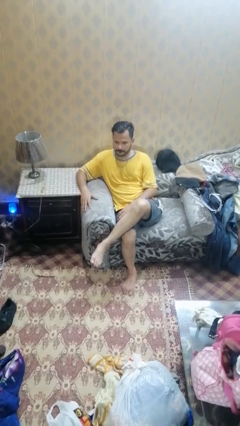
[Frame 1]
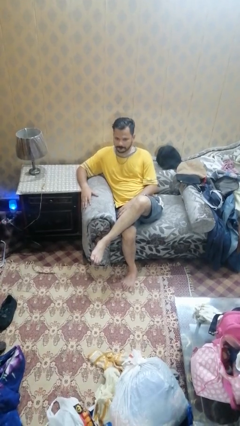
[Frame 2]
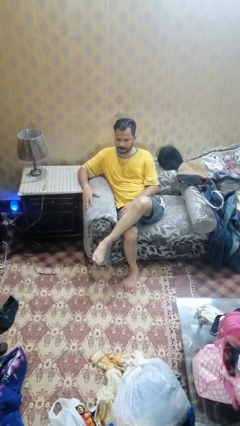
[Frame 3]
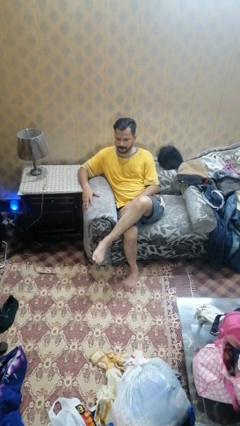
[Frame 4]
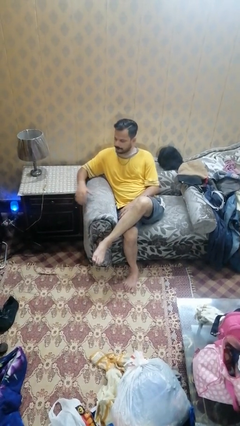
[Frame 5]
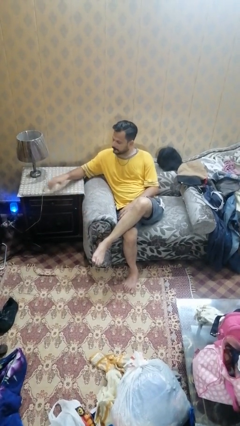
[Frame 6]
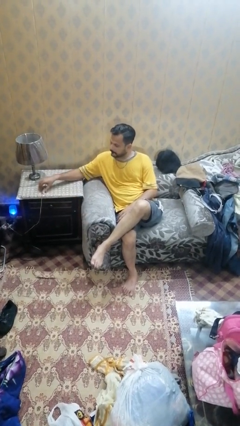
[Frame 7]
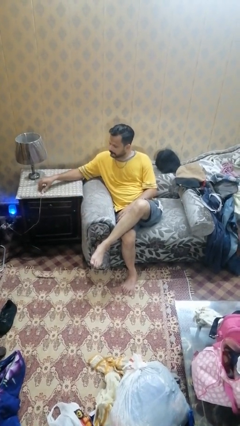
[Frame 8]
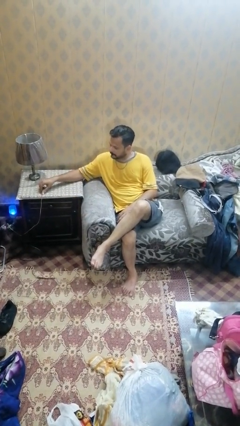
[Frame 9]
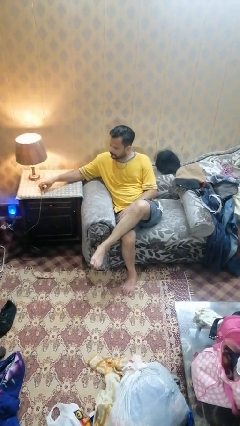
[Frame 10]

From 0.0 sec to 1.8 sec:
person turns on lamp

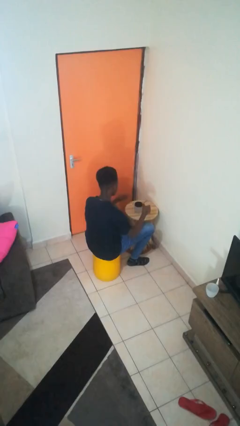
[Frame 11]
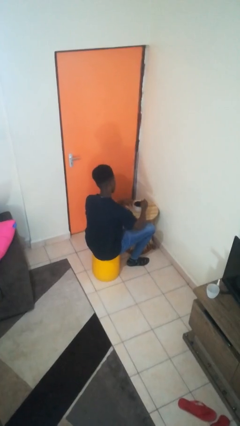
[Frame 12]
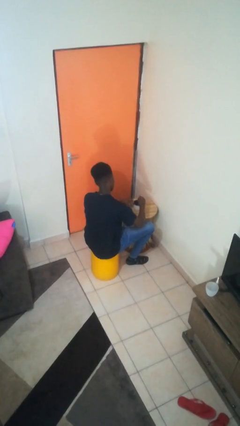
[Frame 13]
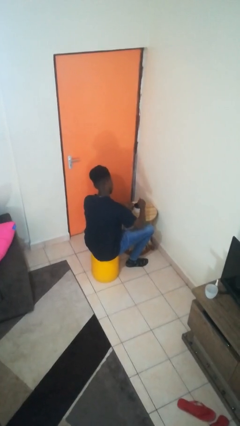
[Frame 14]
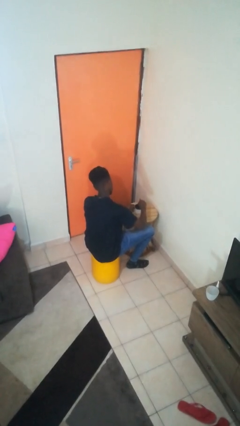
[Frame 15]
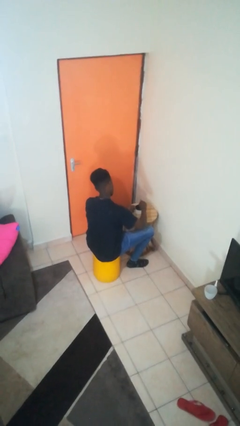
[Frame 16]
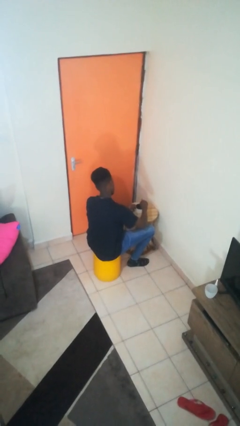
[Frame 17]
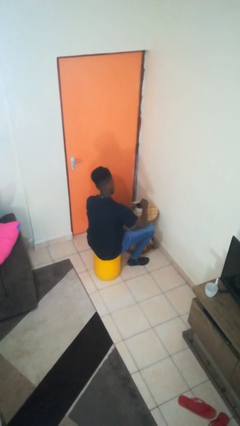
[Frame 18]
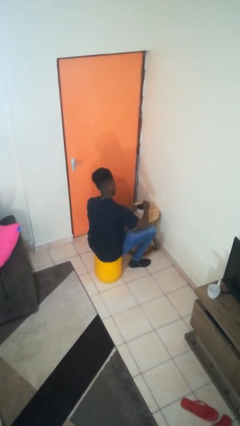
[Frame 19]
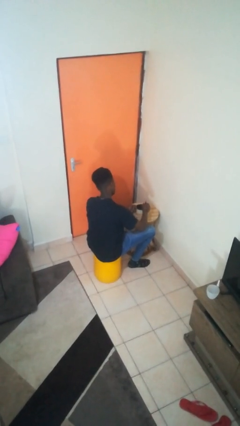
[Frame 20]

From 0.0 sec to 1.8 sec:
person stirs mug

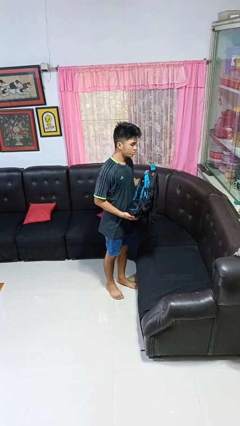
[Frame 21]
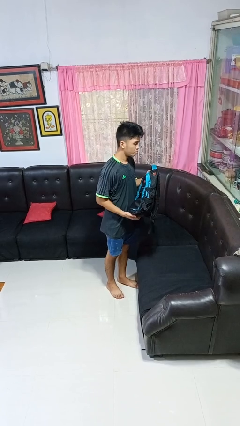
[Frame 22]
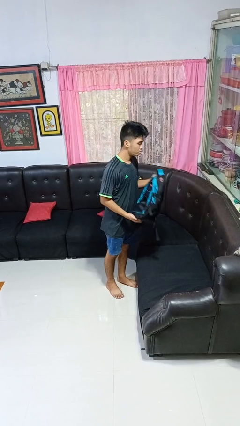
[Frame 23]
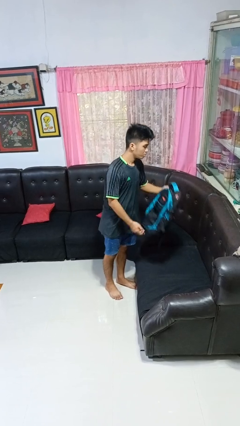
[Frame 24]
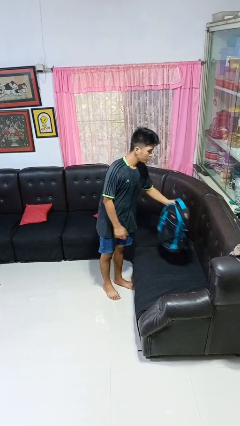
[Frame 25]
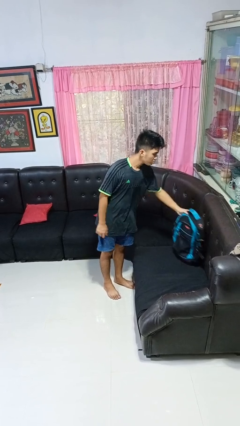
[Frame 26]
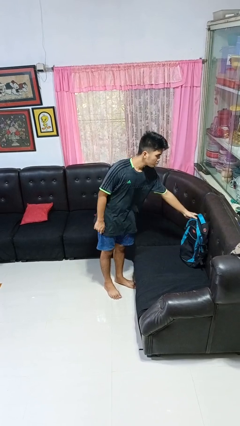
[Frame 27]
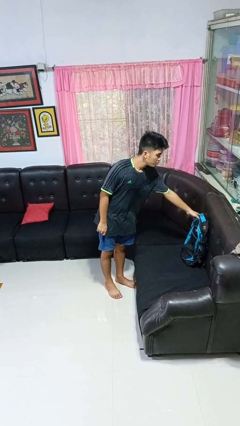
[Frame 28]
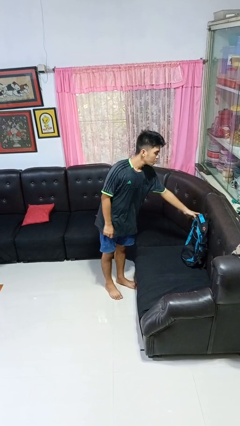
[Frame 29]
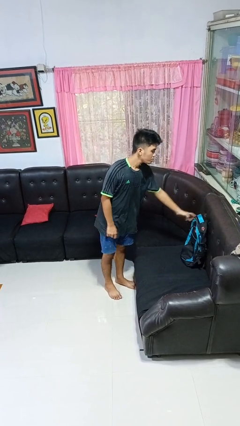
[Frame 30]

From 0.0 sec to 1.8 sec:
person puts down object on couch

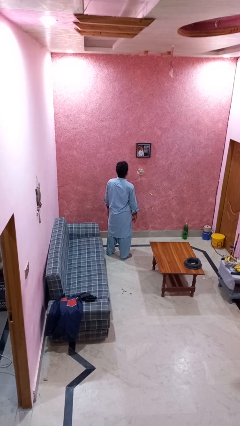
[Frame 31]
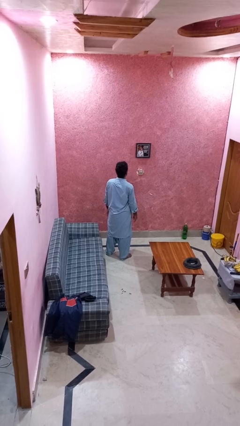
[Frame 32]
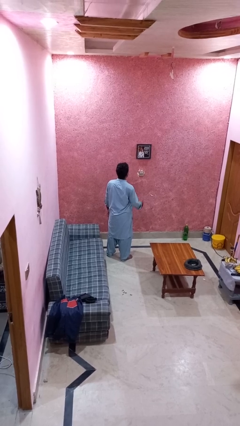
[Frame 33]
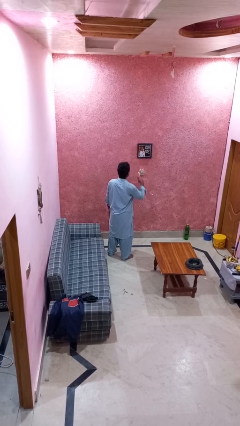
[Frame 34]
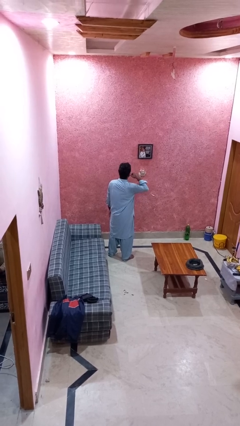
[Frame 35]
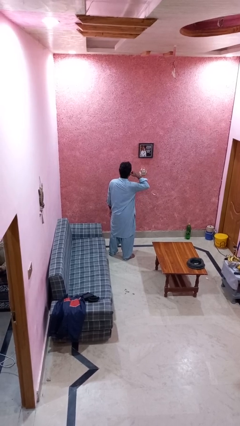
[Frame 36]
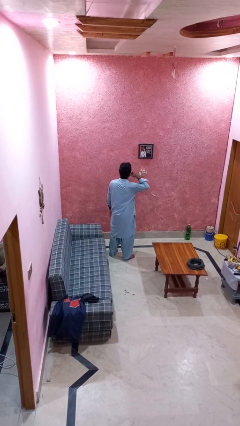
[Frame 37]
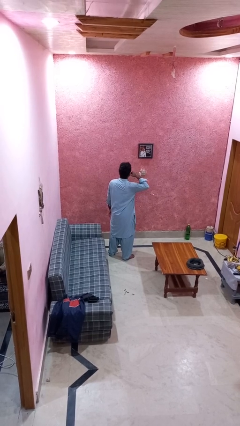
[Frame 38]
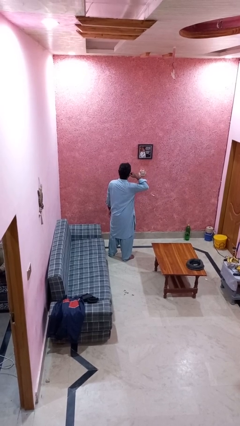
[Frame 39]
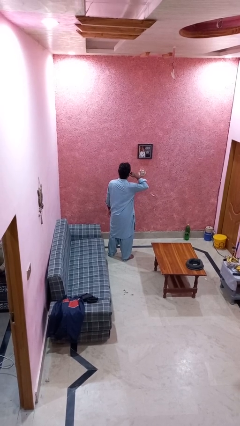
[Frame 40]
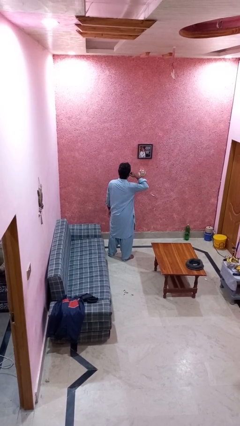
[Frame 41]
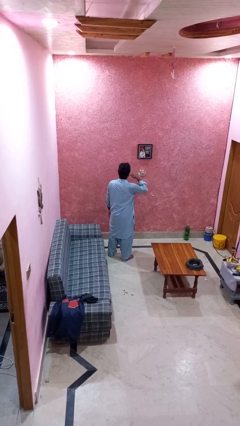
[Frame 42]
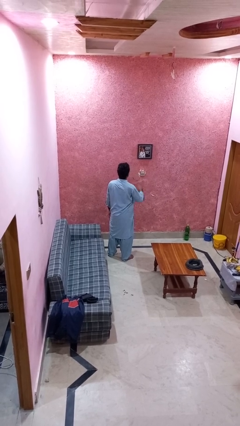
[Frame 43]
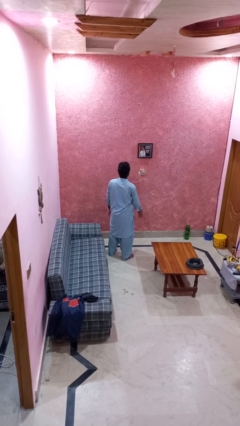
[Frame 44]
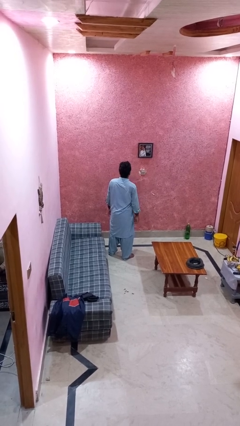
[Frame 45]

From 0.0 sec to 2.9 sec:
person gestures call me

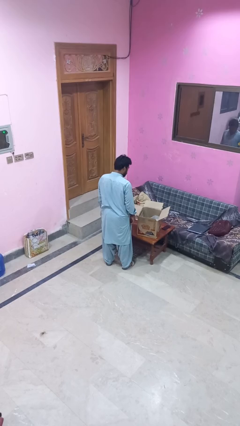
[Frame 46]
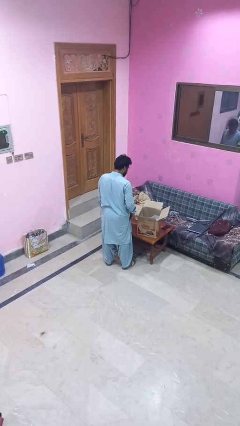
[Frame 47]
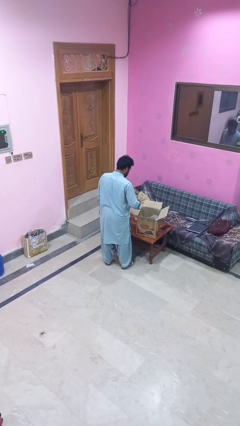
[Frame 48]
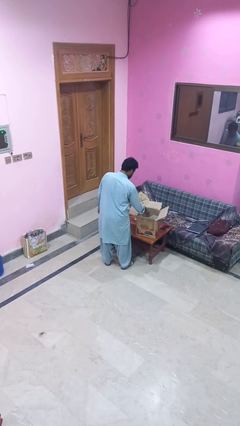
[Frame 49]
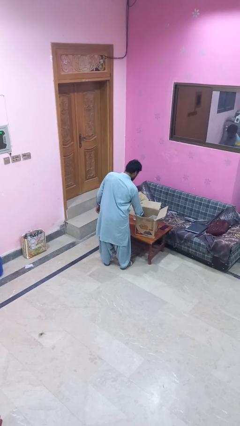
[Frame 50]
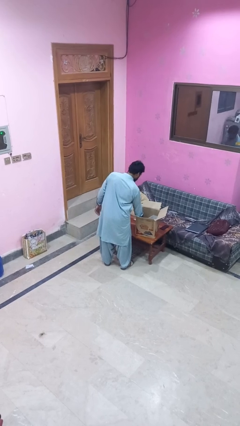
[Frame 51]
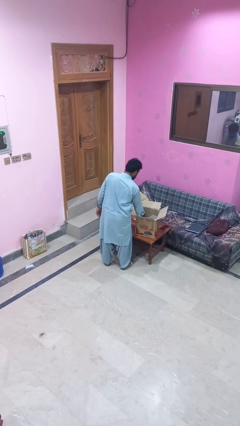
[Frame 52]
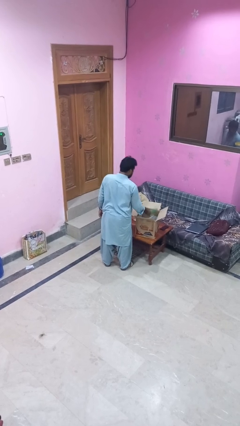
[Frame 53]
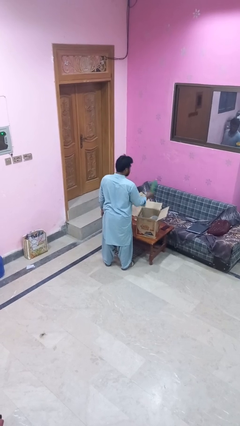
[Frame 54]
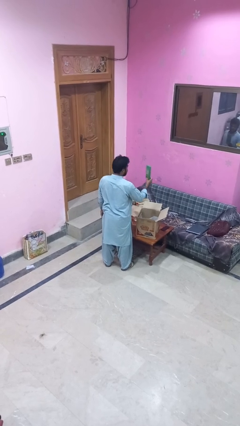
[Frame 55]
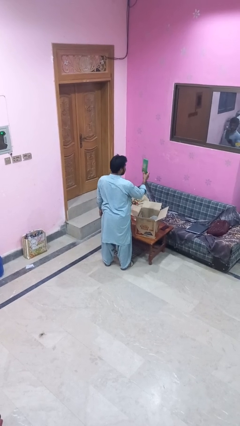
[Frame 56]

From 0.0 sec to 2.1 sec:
person takes object from box

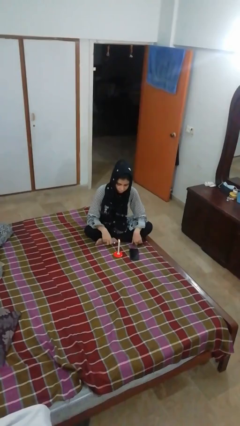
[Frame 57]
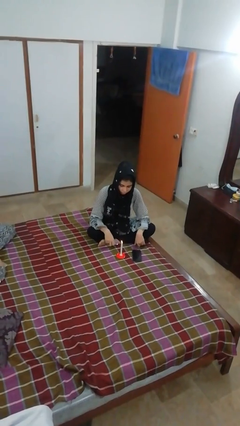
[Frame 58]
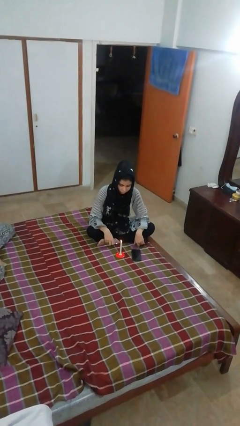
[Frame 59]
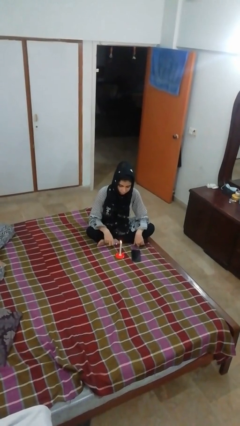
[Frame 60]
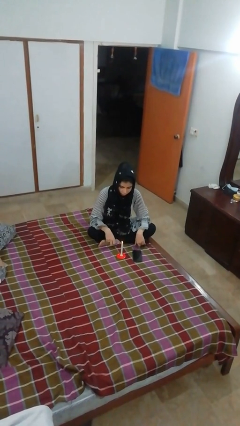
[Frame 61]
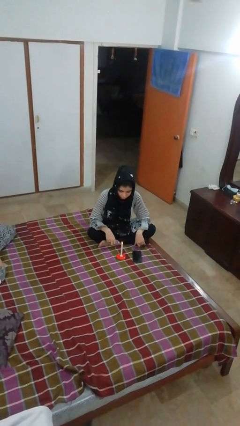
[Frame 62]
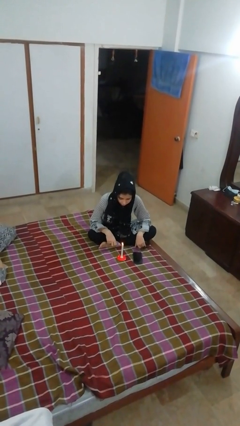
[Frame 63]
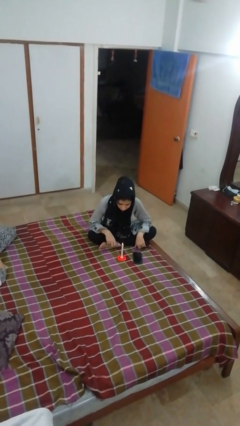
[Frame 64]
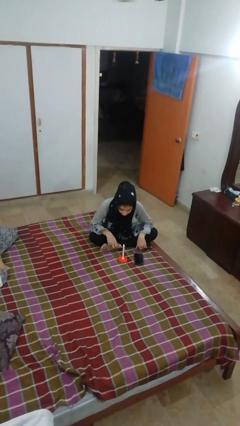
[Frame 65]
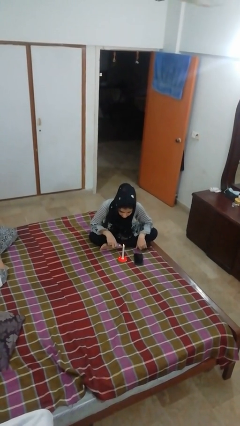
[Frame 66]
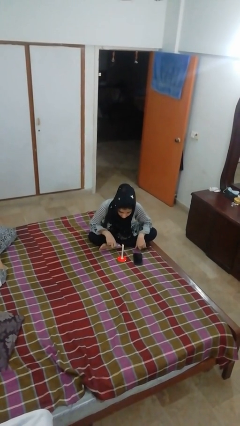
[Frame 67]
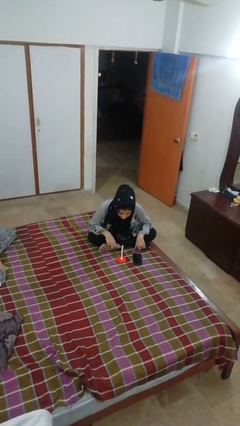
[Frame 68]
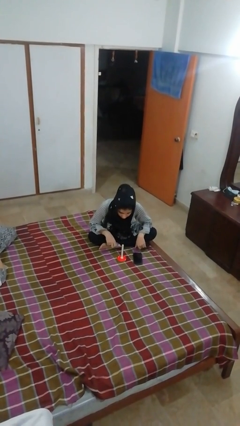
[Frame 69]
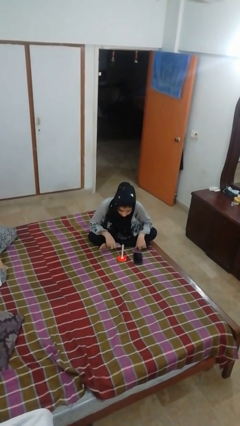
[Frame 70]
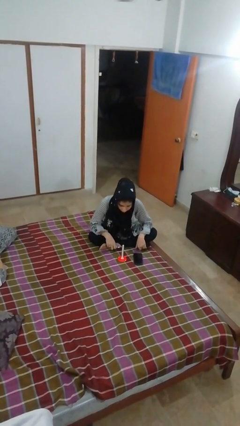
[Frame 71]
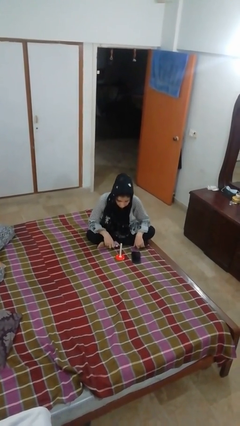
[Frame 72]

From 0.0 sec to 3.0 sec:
person extinguishes candle

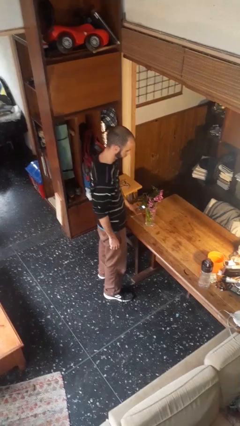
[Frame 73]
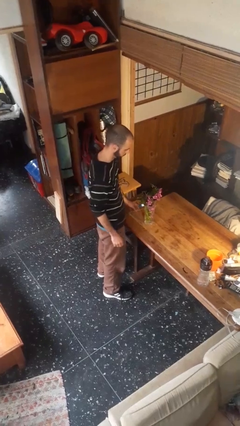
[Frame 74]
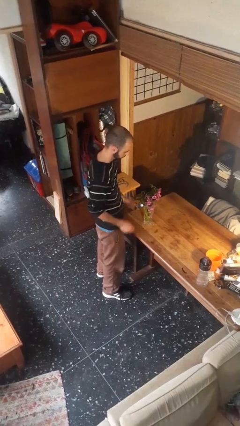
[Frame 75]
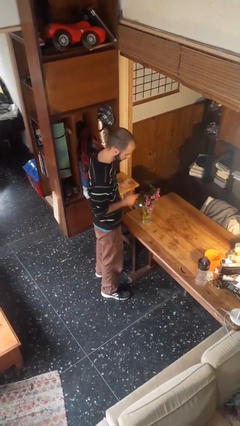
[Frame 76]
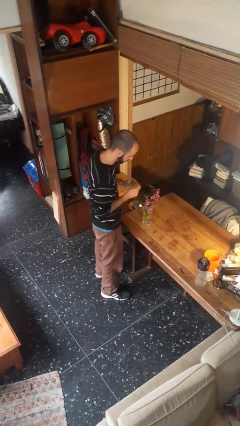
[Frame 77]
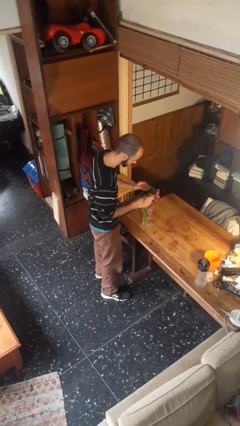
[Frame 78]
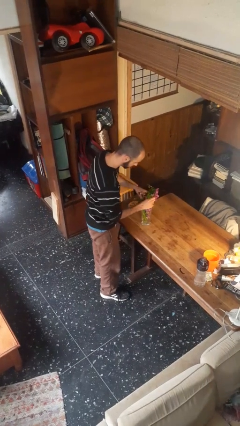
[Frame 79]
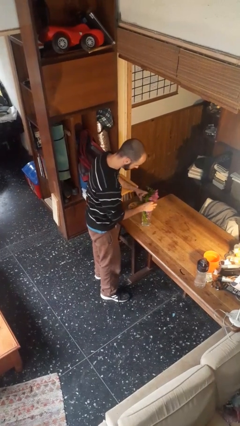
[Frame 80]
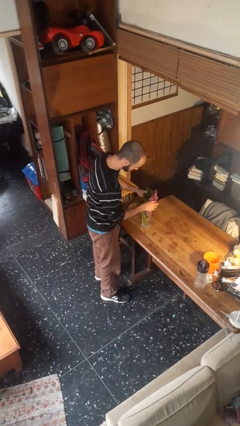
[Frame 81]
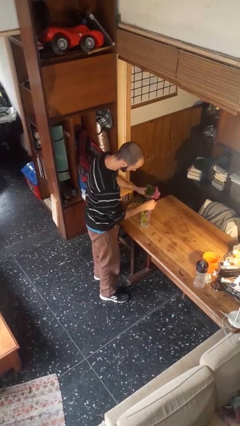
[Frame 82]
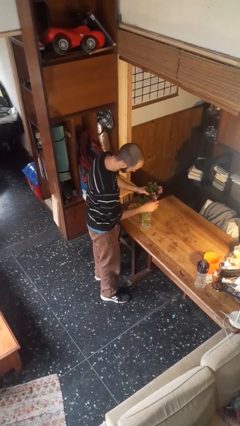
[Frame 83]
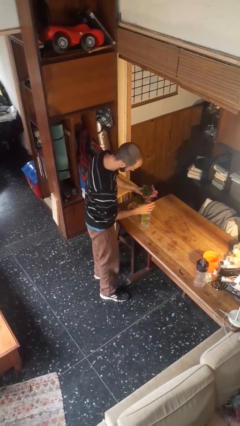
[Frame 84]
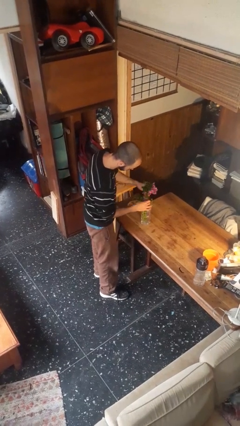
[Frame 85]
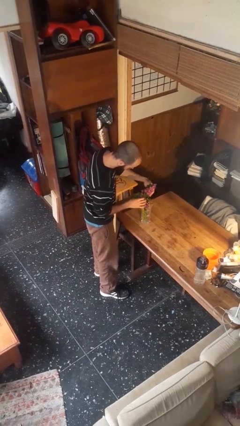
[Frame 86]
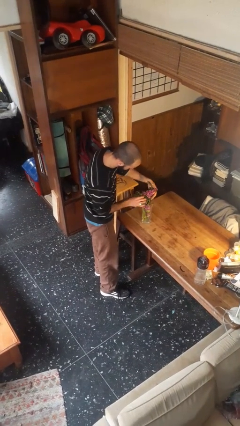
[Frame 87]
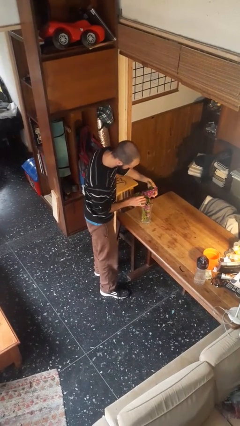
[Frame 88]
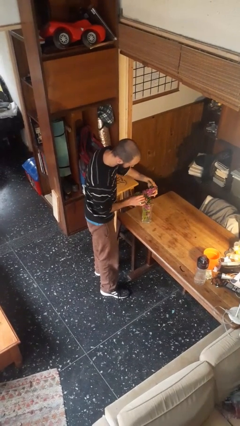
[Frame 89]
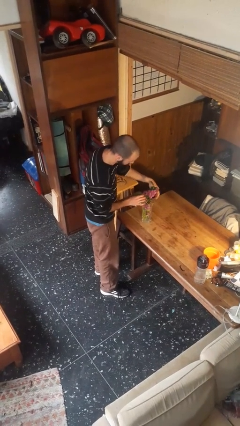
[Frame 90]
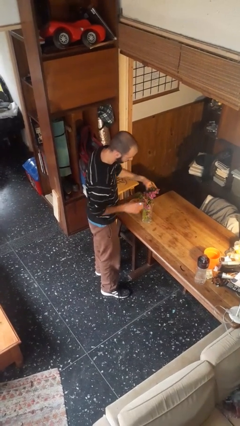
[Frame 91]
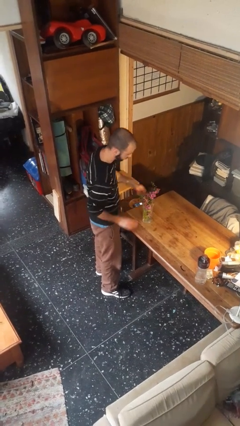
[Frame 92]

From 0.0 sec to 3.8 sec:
person arranges flowers in vase
